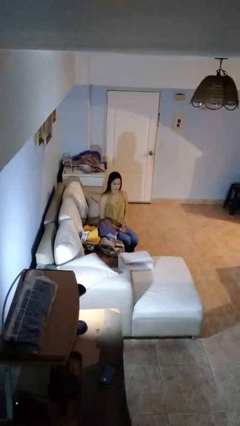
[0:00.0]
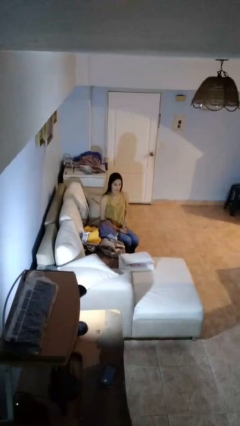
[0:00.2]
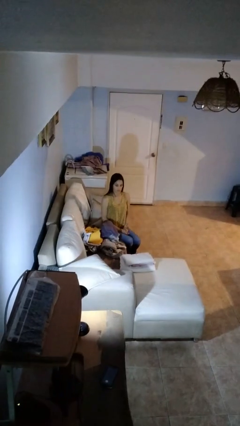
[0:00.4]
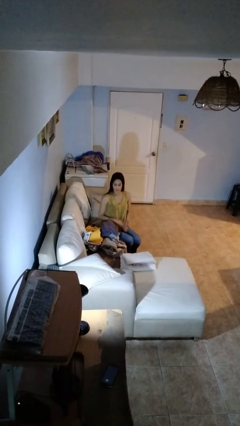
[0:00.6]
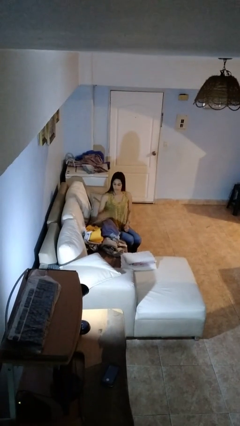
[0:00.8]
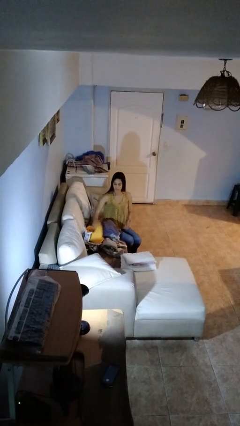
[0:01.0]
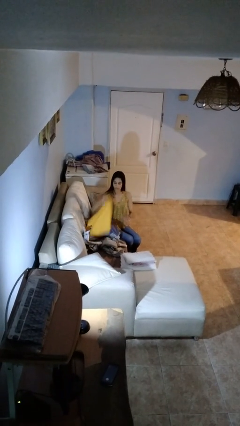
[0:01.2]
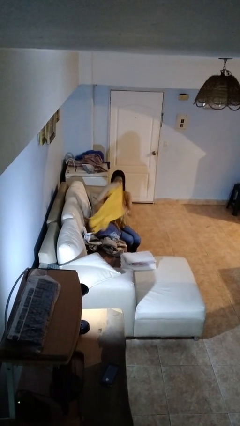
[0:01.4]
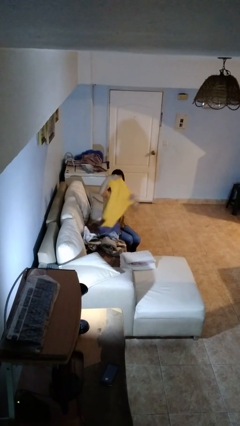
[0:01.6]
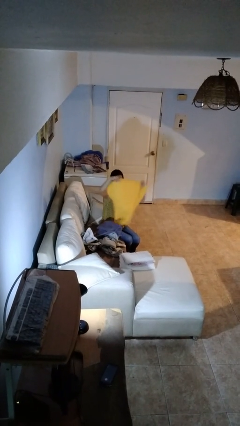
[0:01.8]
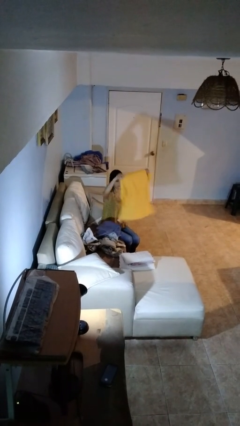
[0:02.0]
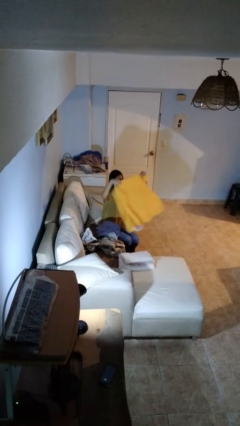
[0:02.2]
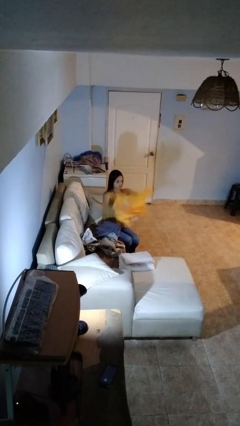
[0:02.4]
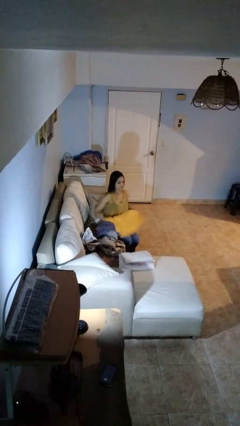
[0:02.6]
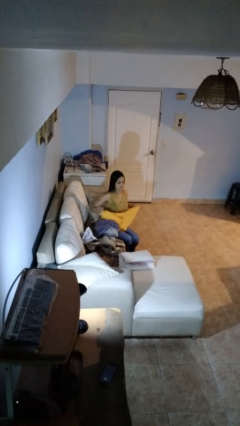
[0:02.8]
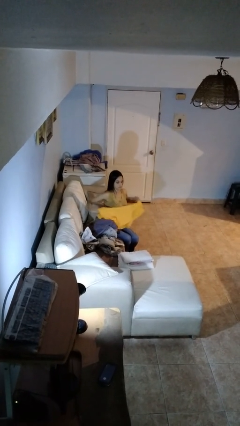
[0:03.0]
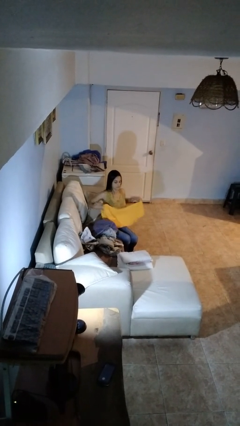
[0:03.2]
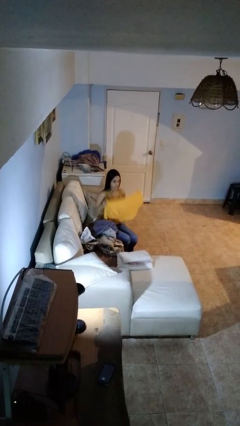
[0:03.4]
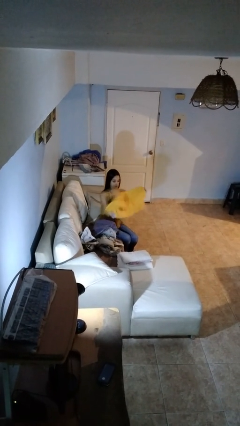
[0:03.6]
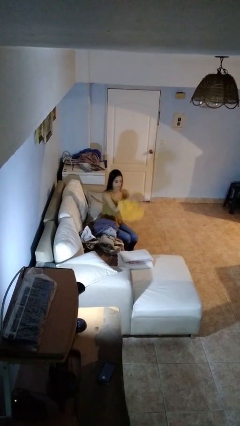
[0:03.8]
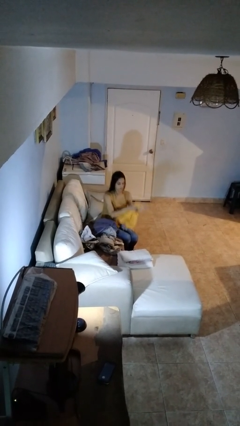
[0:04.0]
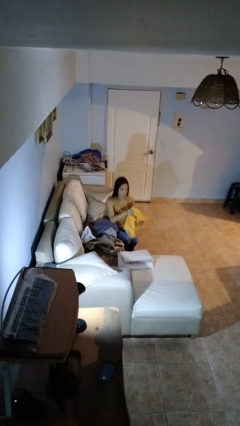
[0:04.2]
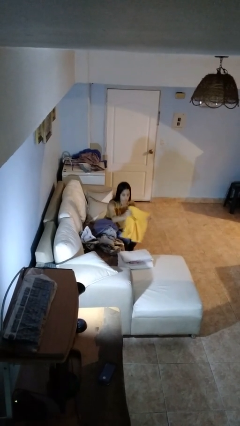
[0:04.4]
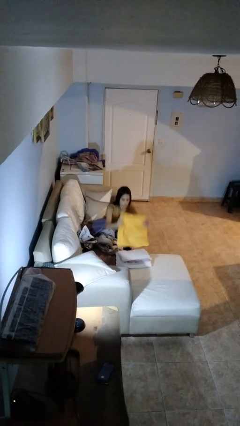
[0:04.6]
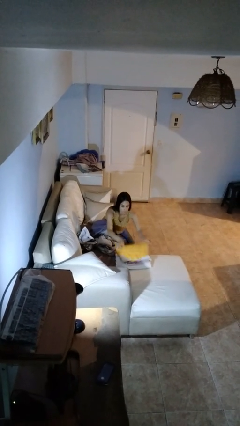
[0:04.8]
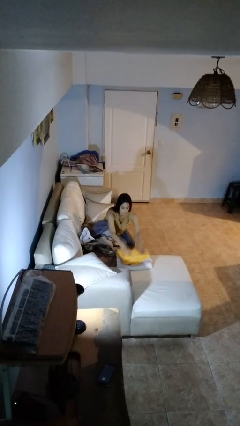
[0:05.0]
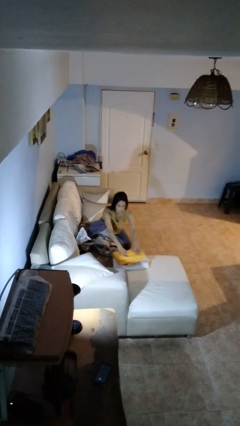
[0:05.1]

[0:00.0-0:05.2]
person folds towel

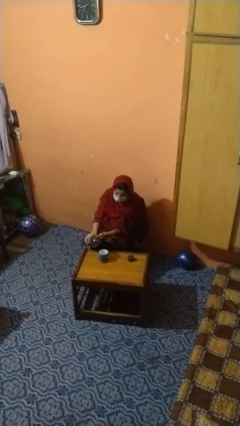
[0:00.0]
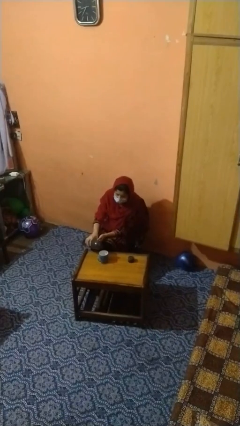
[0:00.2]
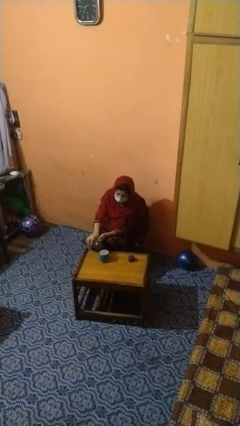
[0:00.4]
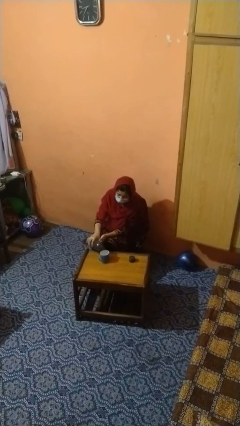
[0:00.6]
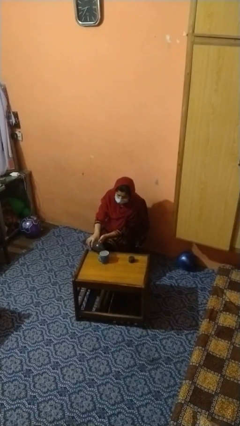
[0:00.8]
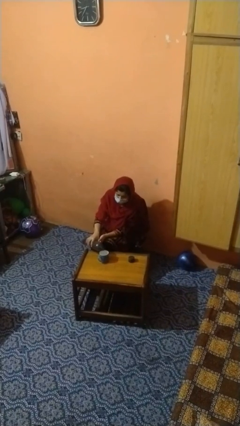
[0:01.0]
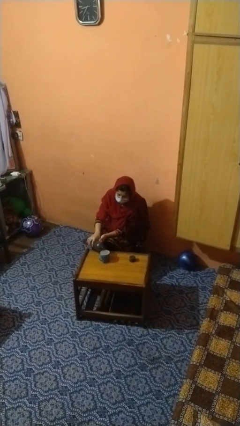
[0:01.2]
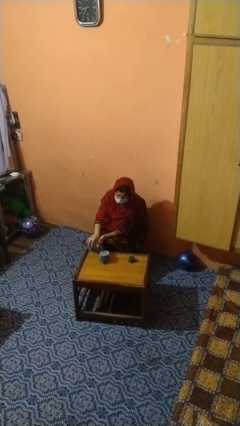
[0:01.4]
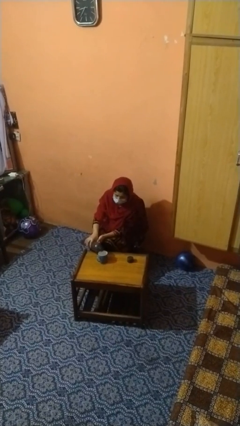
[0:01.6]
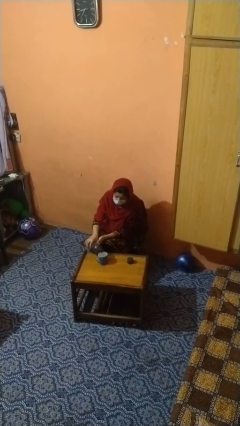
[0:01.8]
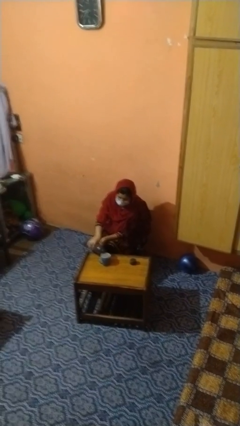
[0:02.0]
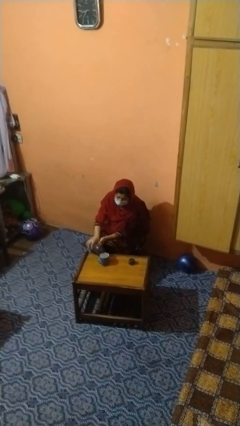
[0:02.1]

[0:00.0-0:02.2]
person pours liquid into cup

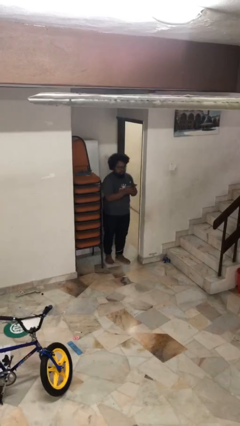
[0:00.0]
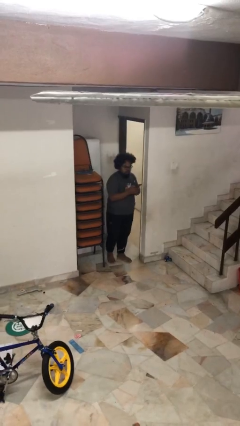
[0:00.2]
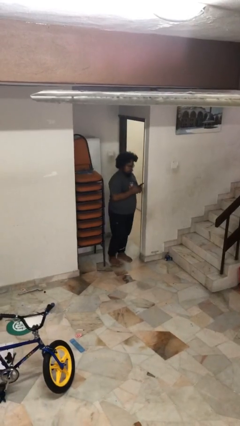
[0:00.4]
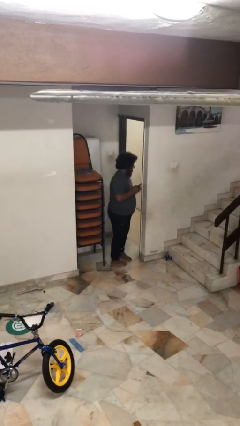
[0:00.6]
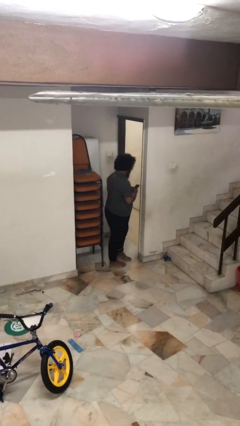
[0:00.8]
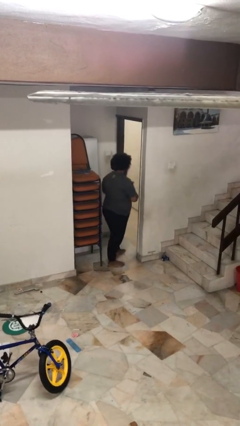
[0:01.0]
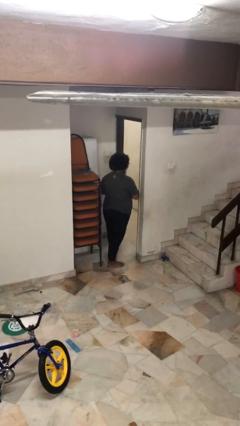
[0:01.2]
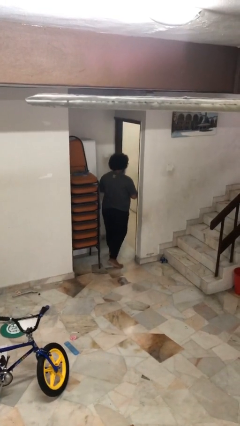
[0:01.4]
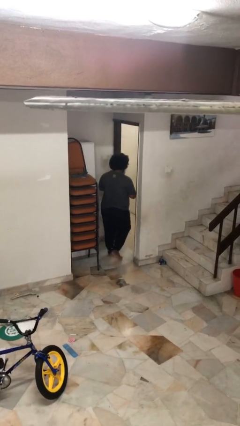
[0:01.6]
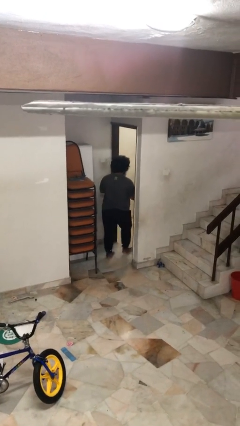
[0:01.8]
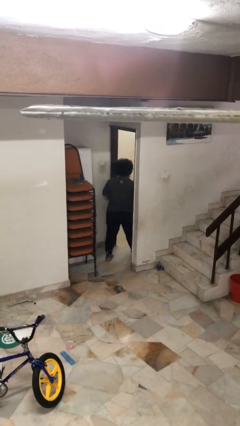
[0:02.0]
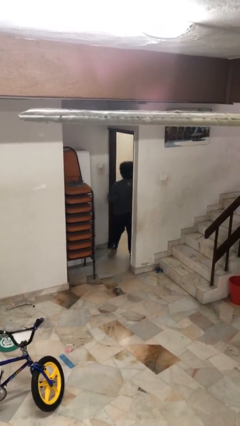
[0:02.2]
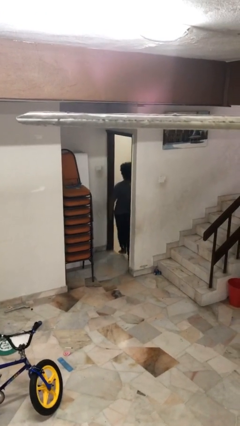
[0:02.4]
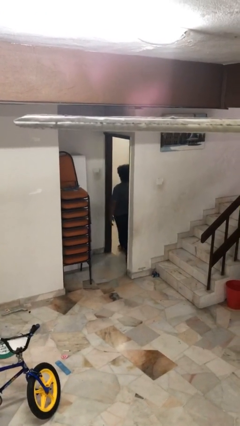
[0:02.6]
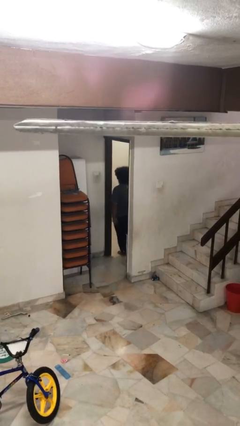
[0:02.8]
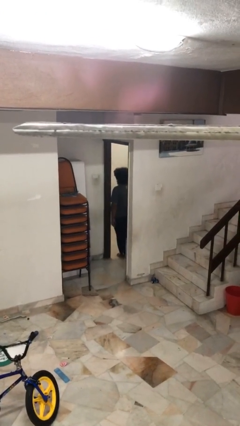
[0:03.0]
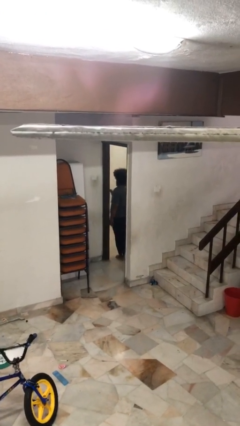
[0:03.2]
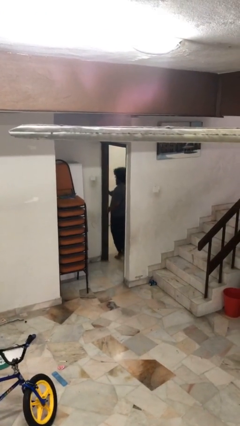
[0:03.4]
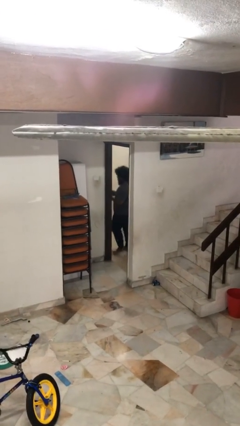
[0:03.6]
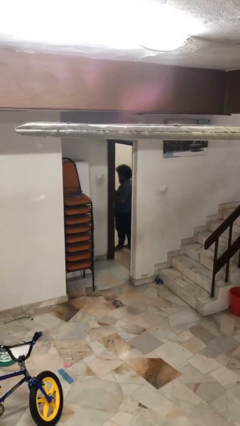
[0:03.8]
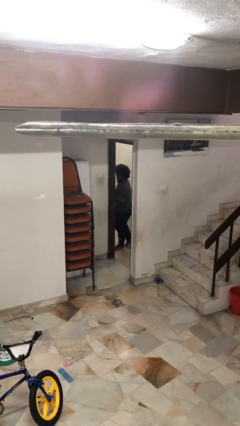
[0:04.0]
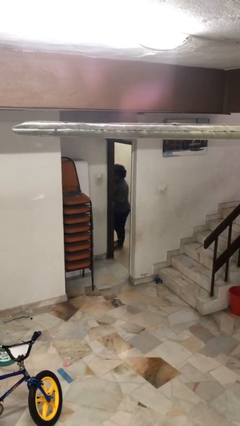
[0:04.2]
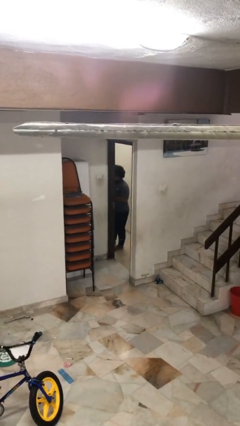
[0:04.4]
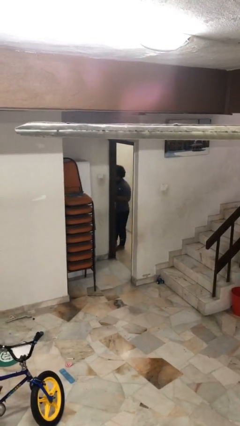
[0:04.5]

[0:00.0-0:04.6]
person exits scene through structure

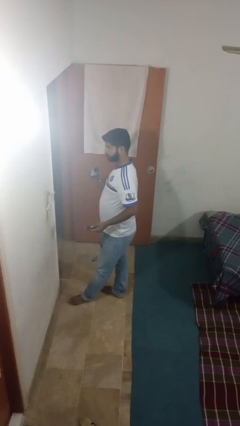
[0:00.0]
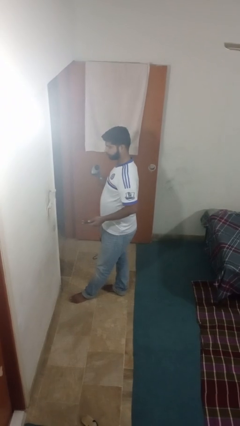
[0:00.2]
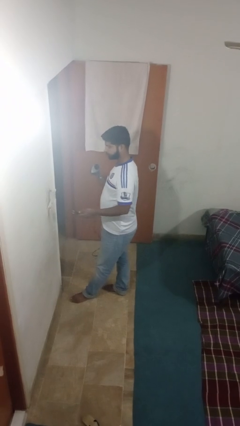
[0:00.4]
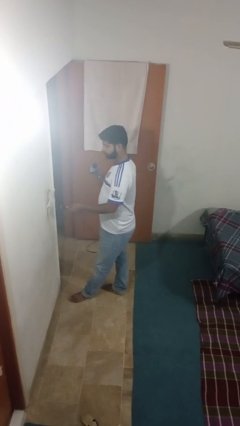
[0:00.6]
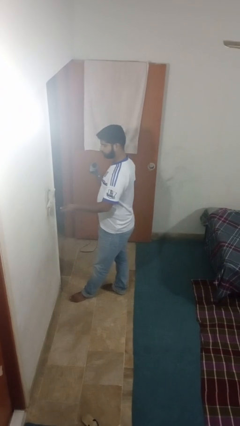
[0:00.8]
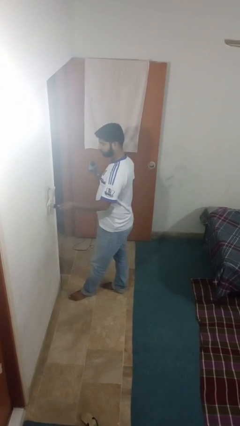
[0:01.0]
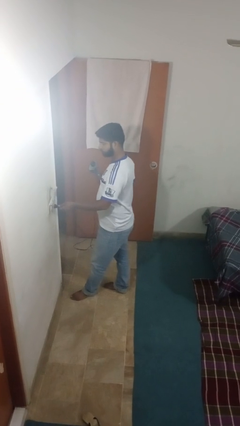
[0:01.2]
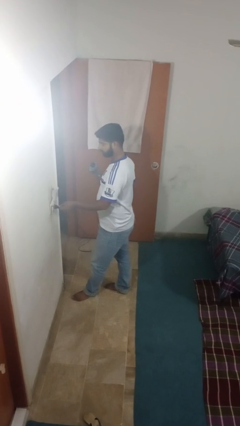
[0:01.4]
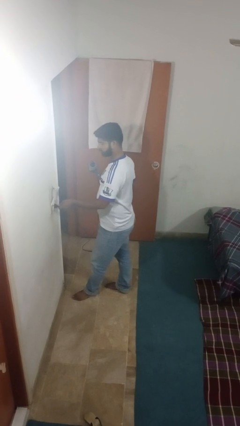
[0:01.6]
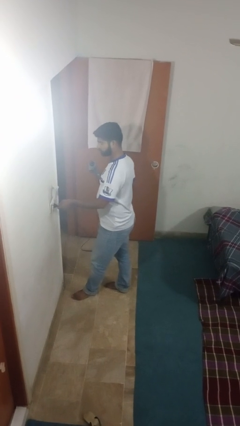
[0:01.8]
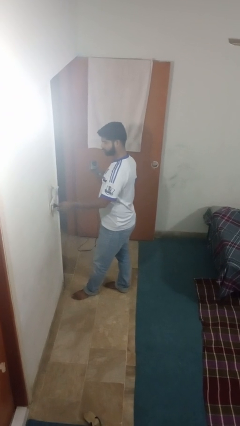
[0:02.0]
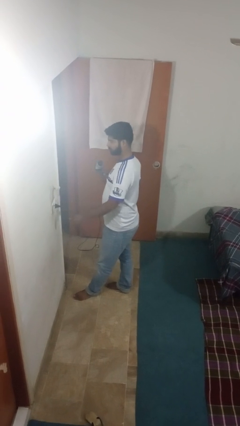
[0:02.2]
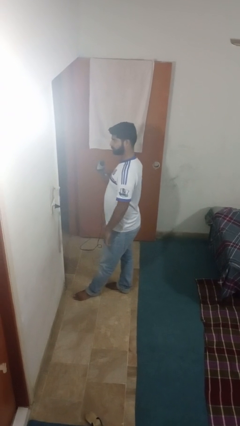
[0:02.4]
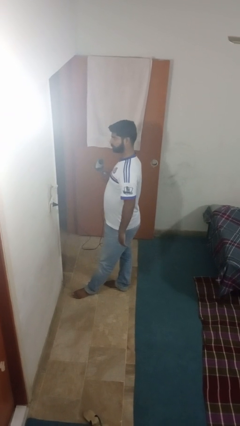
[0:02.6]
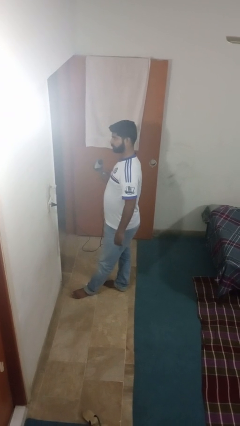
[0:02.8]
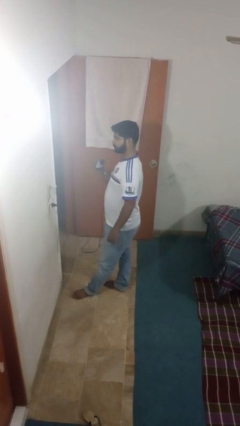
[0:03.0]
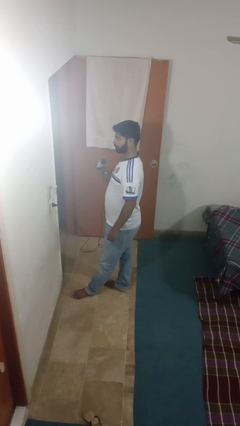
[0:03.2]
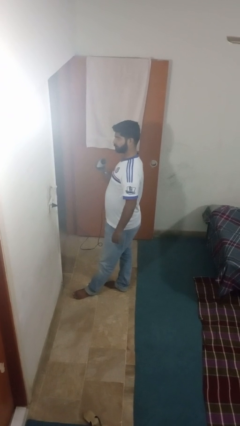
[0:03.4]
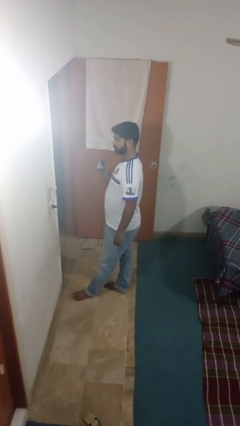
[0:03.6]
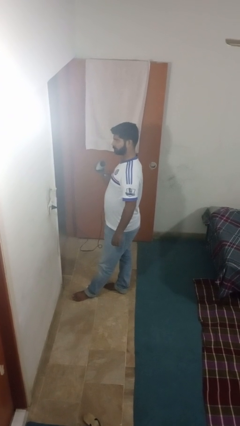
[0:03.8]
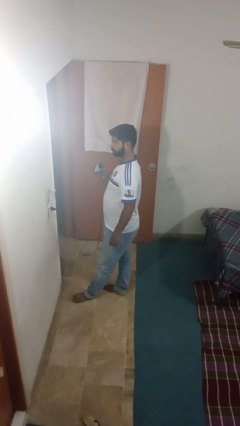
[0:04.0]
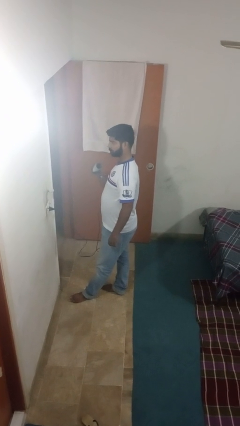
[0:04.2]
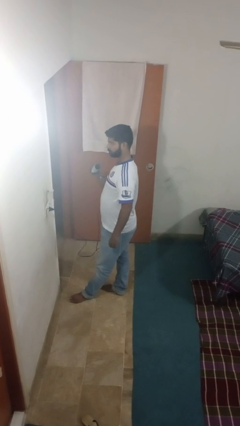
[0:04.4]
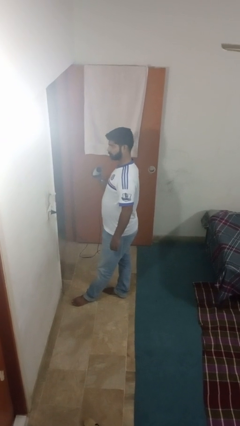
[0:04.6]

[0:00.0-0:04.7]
person plugs into electrical socket

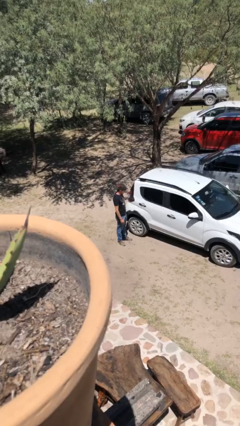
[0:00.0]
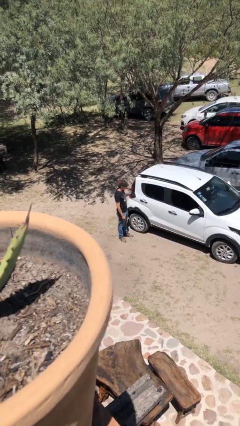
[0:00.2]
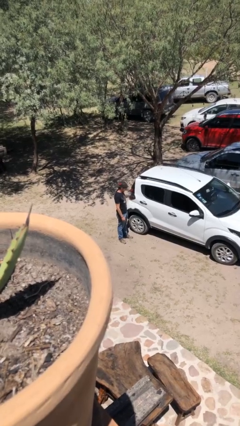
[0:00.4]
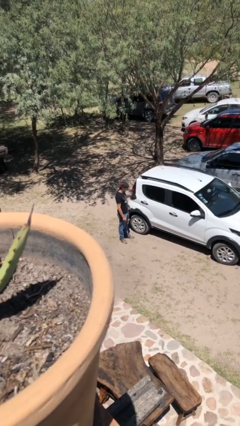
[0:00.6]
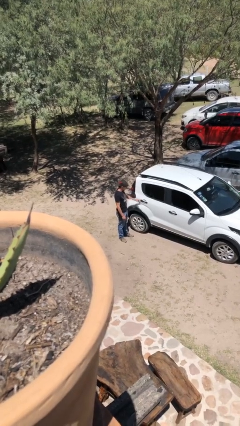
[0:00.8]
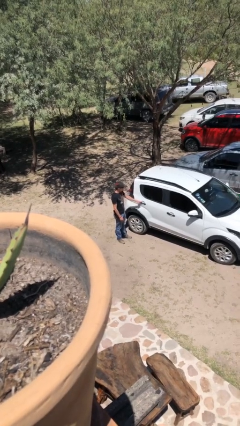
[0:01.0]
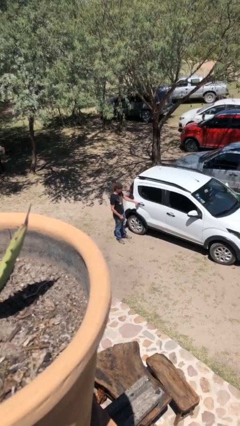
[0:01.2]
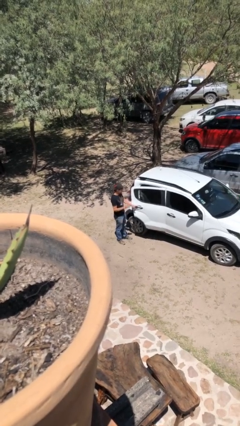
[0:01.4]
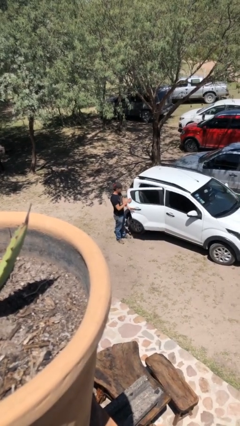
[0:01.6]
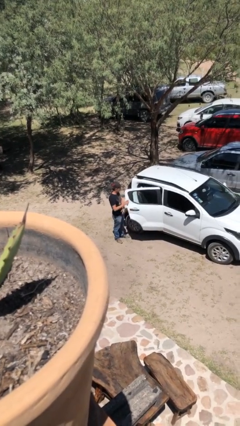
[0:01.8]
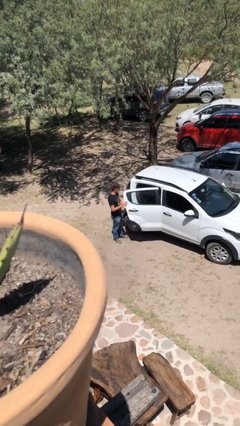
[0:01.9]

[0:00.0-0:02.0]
person opens car door
